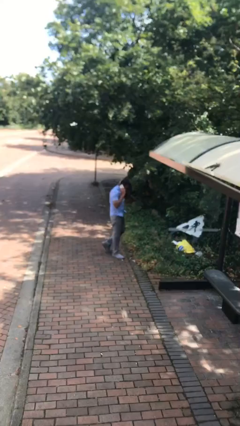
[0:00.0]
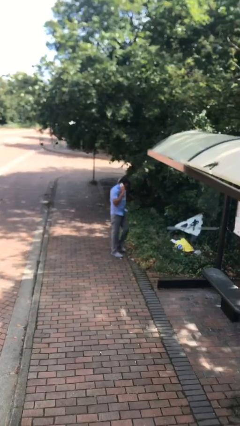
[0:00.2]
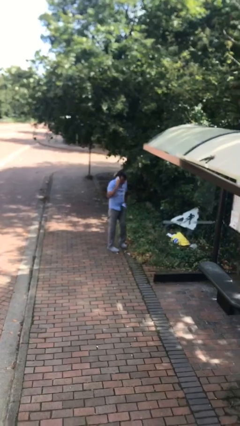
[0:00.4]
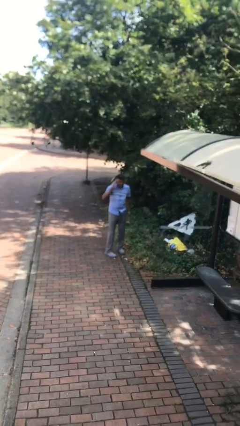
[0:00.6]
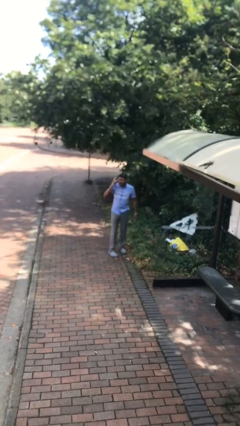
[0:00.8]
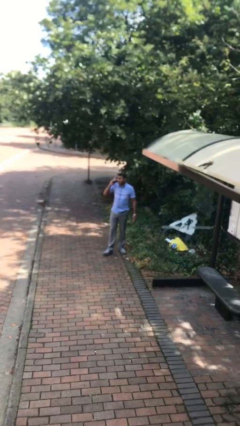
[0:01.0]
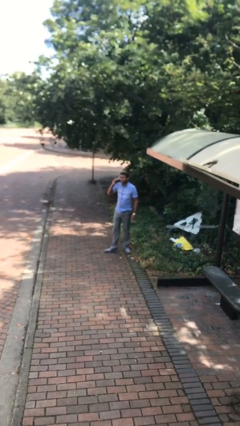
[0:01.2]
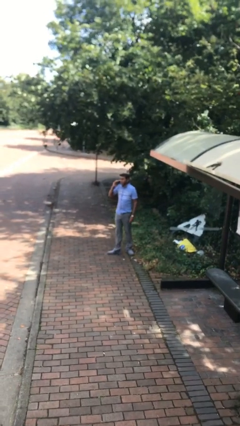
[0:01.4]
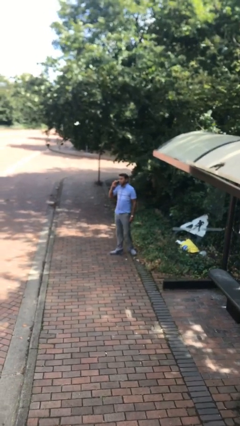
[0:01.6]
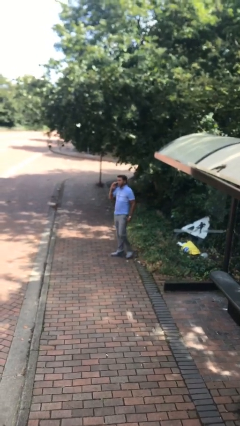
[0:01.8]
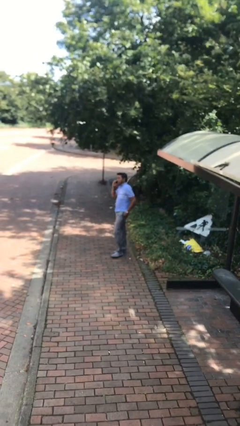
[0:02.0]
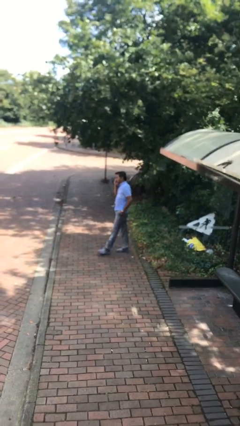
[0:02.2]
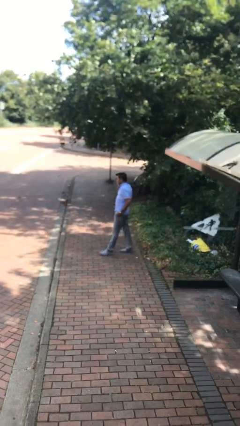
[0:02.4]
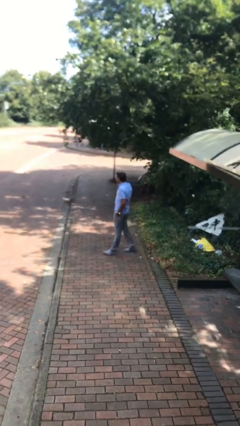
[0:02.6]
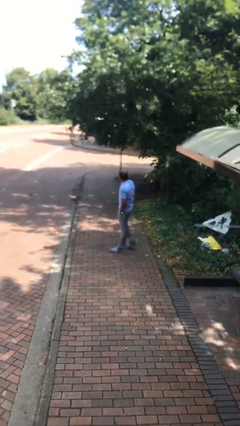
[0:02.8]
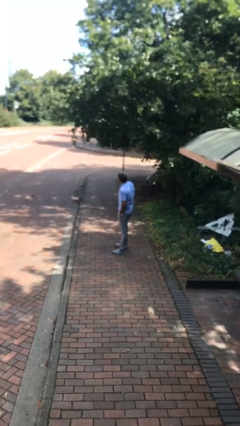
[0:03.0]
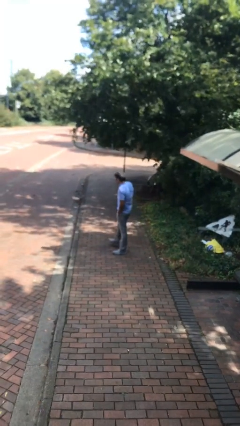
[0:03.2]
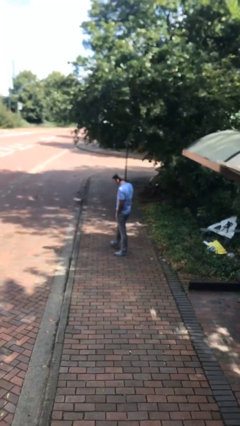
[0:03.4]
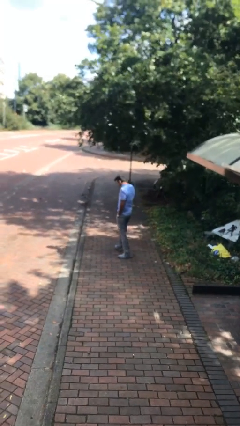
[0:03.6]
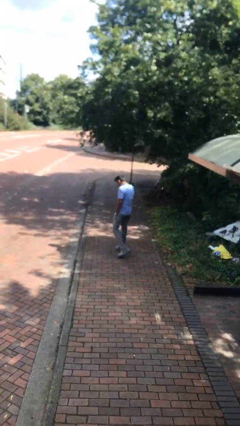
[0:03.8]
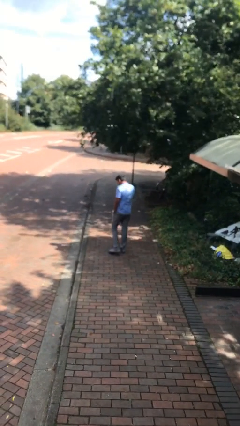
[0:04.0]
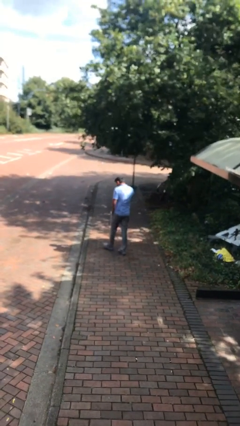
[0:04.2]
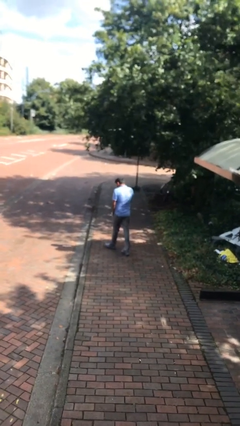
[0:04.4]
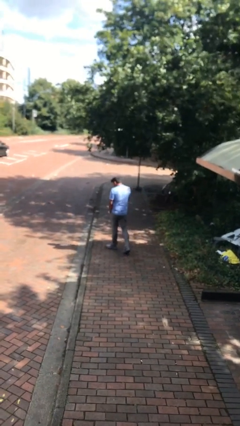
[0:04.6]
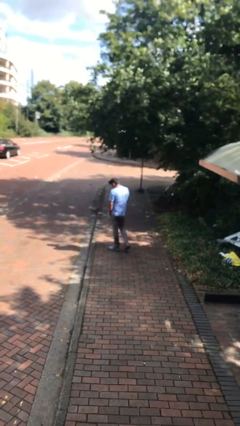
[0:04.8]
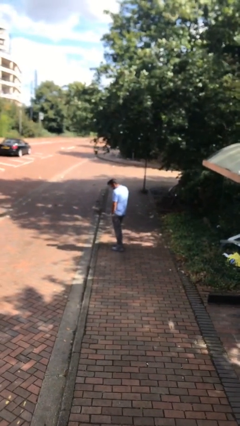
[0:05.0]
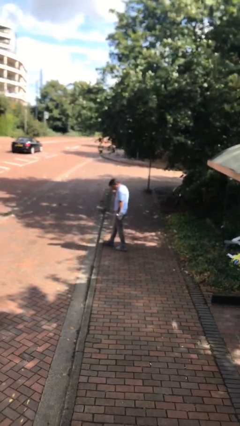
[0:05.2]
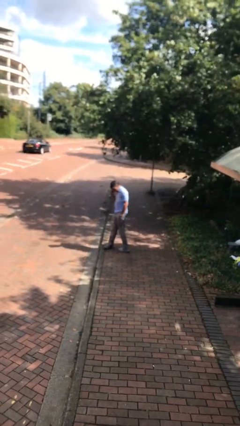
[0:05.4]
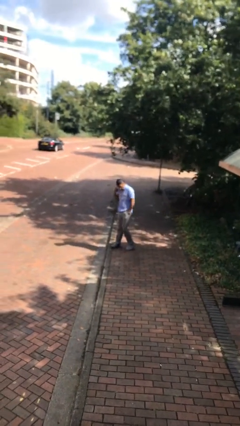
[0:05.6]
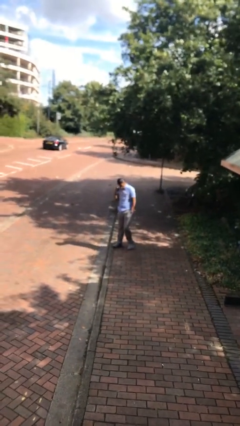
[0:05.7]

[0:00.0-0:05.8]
person talks on phone

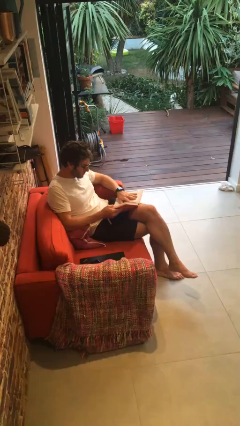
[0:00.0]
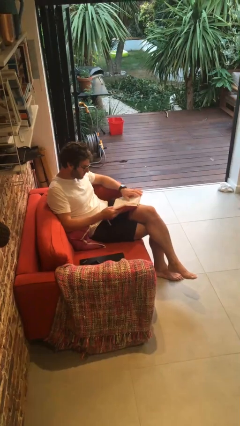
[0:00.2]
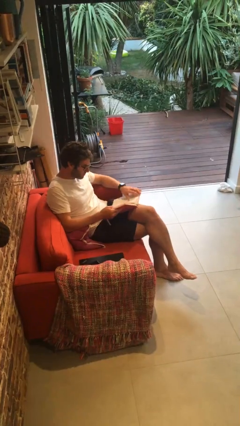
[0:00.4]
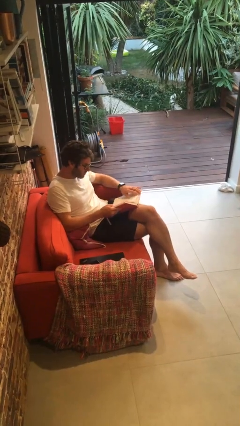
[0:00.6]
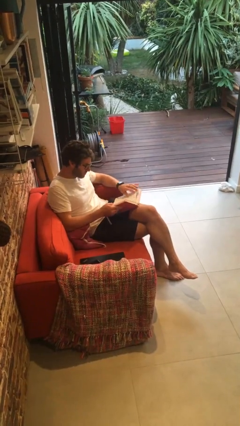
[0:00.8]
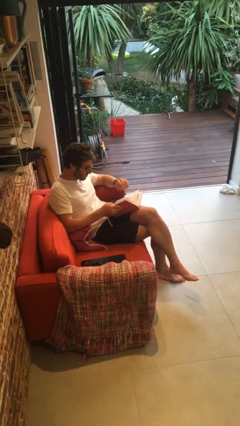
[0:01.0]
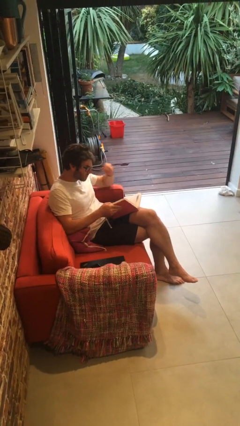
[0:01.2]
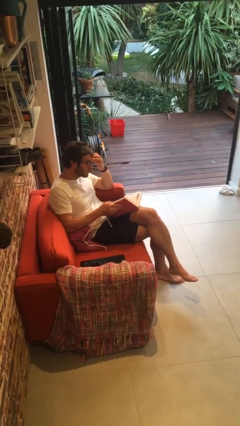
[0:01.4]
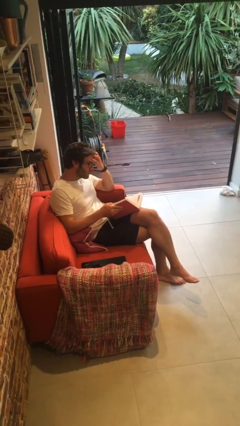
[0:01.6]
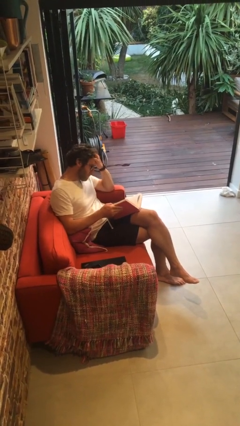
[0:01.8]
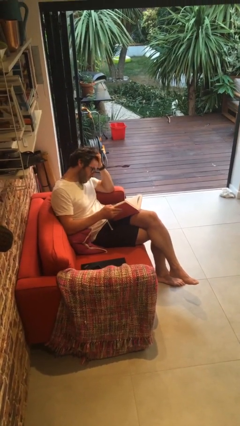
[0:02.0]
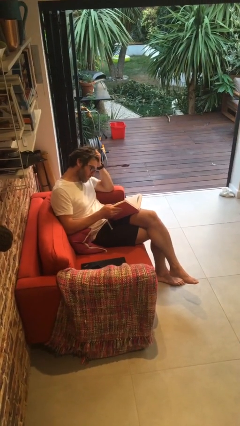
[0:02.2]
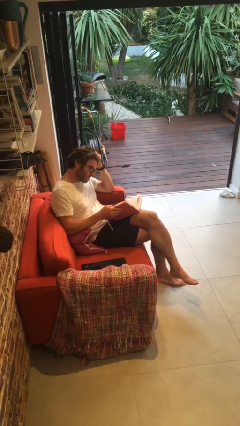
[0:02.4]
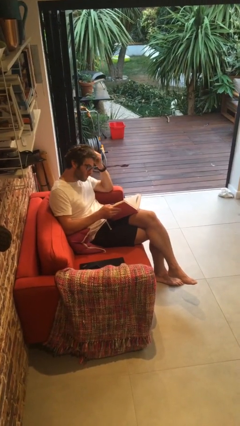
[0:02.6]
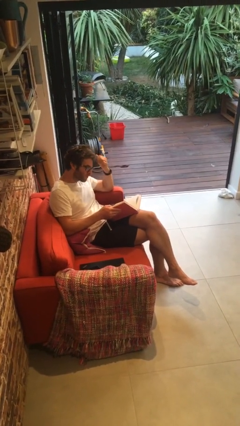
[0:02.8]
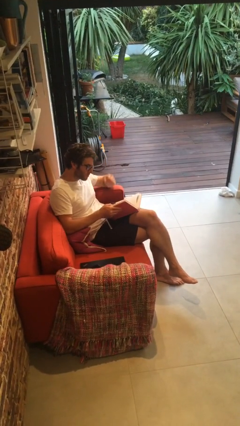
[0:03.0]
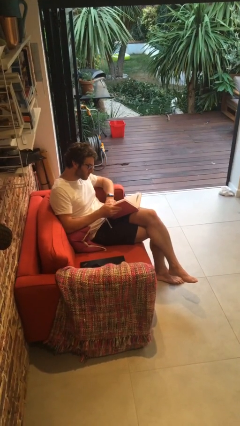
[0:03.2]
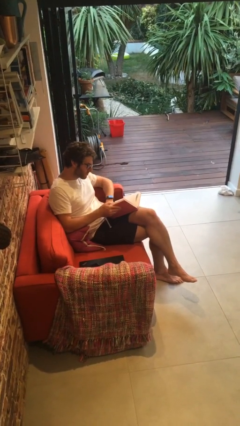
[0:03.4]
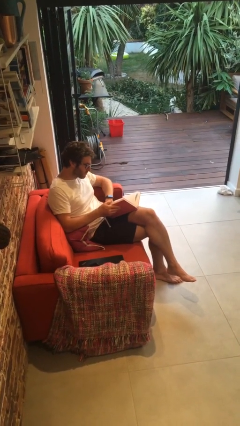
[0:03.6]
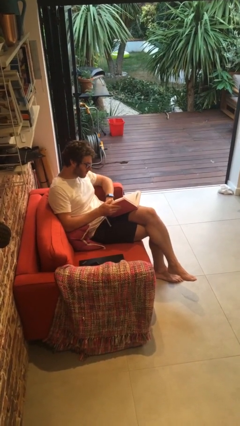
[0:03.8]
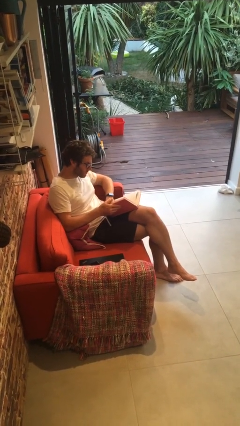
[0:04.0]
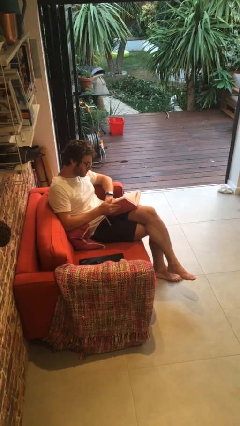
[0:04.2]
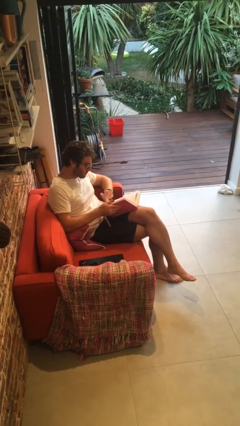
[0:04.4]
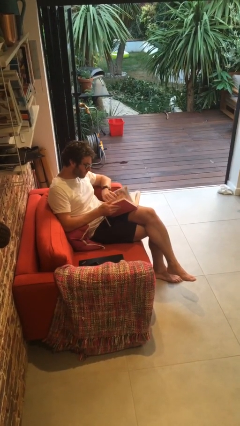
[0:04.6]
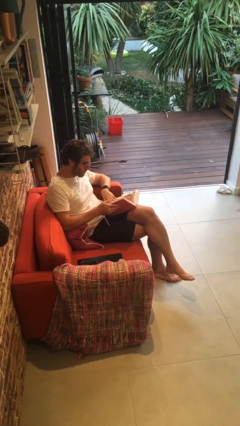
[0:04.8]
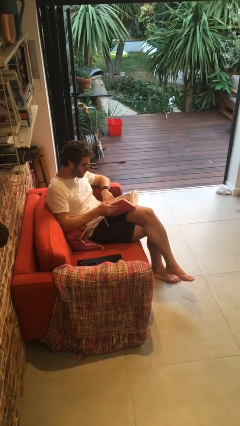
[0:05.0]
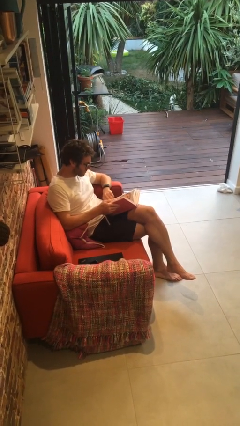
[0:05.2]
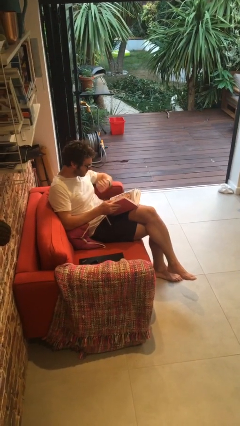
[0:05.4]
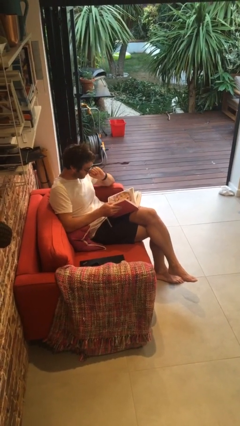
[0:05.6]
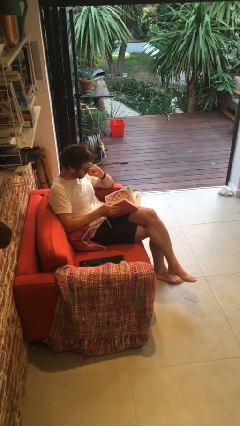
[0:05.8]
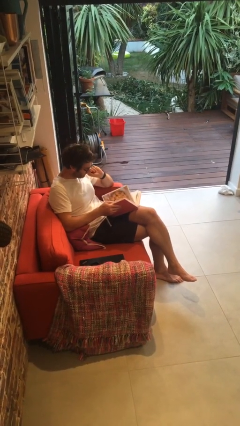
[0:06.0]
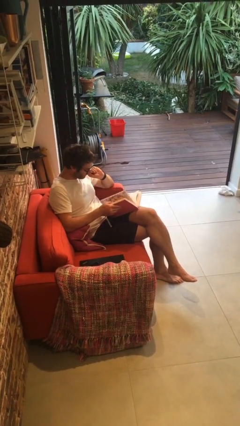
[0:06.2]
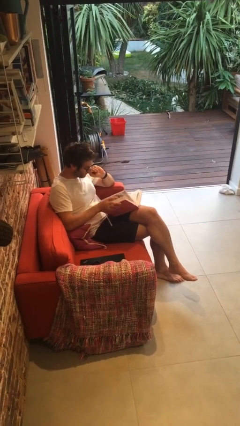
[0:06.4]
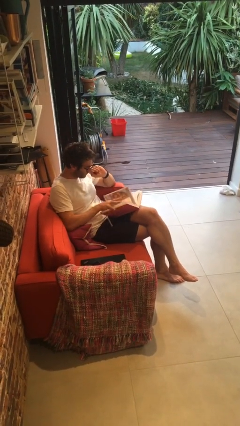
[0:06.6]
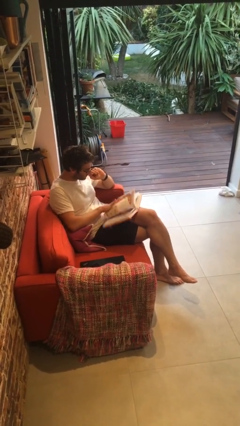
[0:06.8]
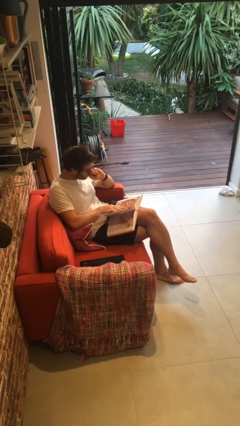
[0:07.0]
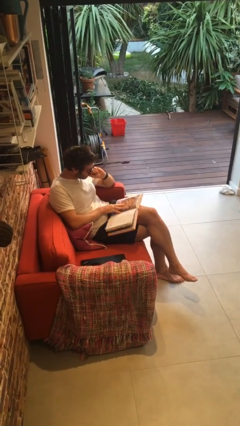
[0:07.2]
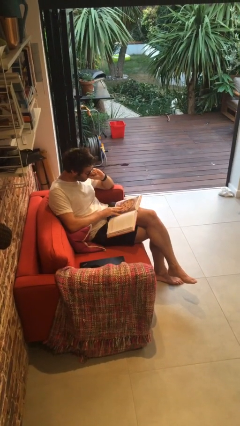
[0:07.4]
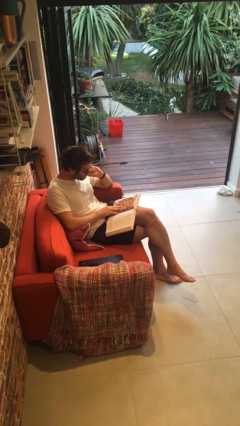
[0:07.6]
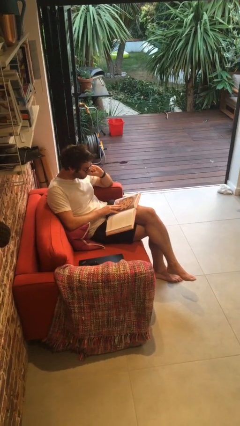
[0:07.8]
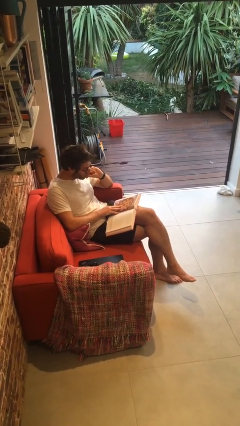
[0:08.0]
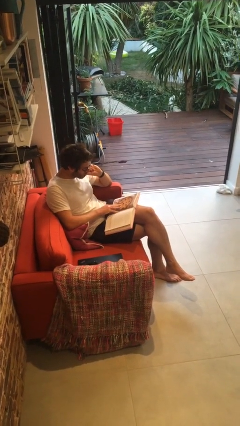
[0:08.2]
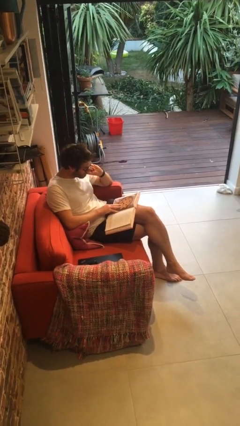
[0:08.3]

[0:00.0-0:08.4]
person reads document

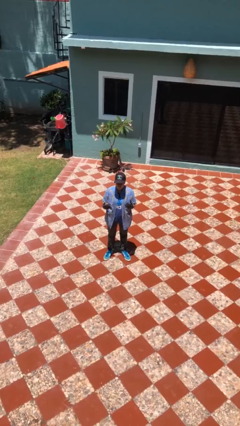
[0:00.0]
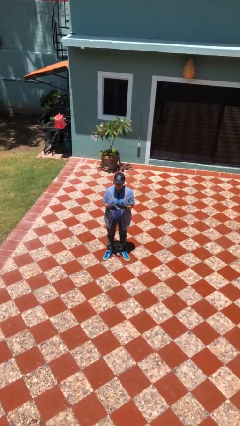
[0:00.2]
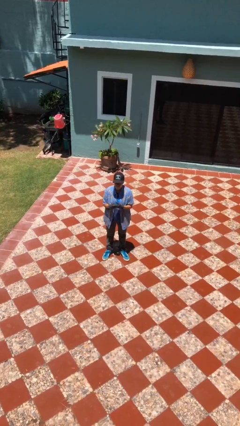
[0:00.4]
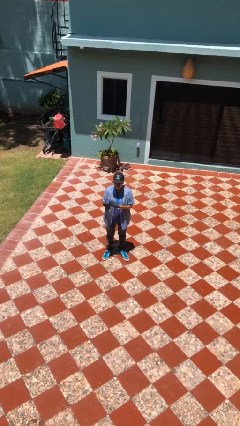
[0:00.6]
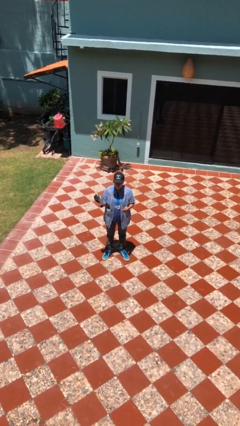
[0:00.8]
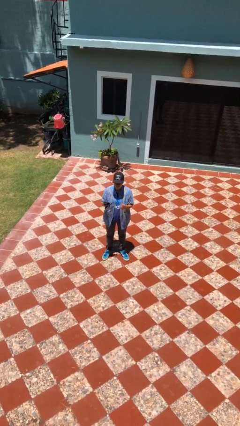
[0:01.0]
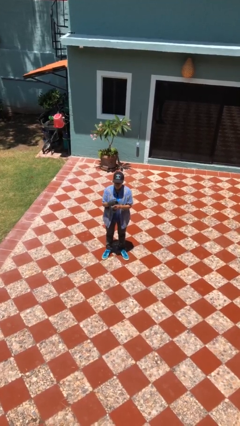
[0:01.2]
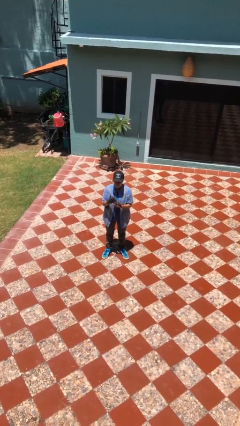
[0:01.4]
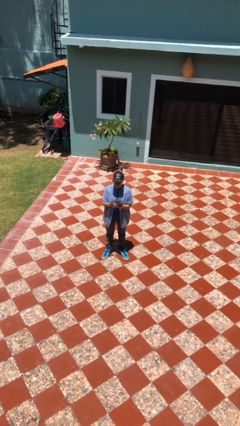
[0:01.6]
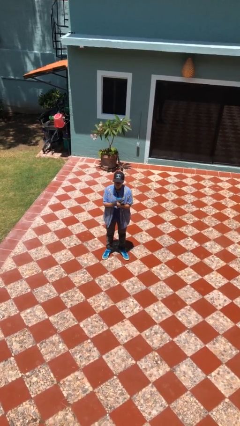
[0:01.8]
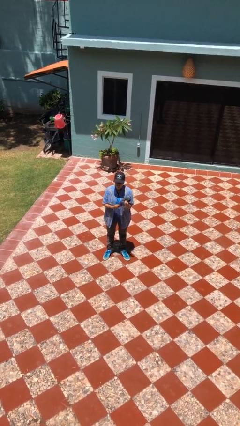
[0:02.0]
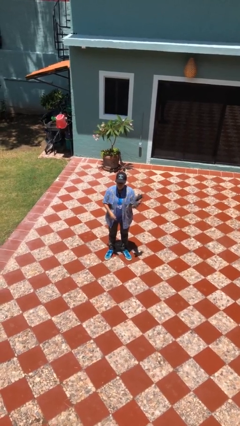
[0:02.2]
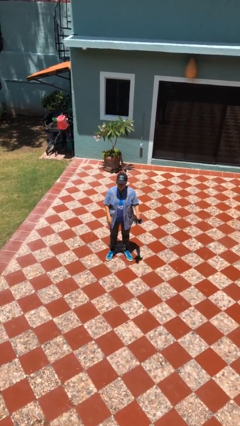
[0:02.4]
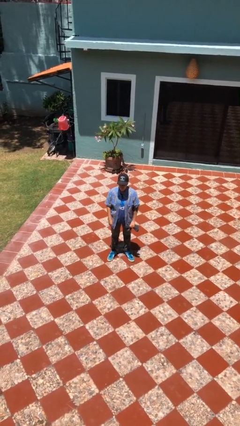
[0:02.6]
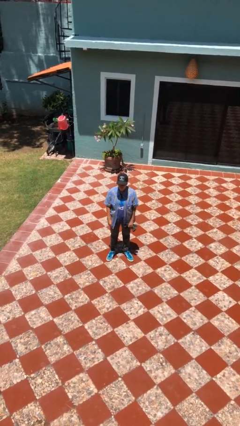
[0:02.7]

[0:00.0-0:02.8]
person takes off gloves

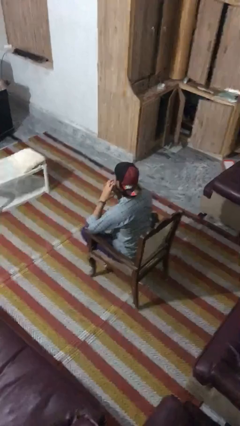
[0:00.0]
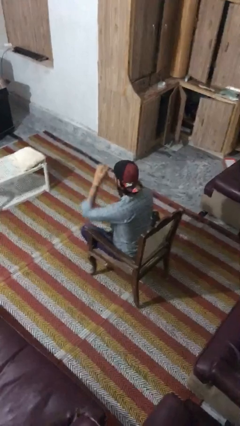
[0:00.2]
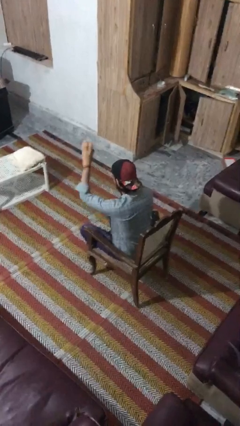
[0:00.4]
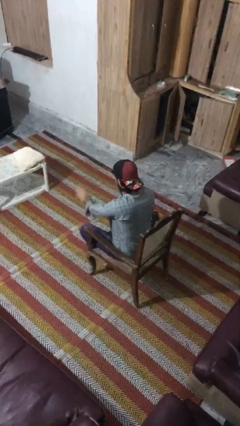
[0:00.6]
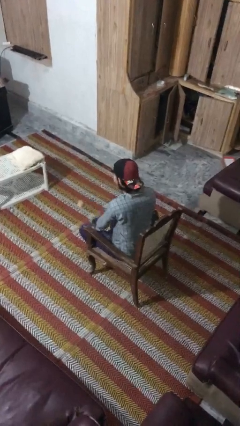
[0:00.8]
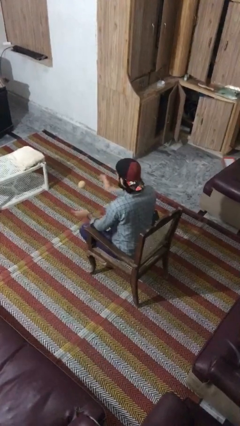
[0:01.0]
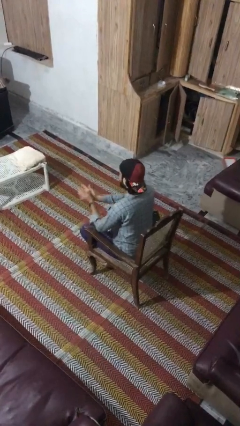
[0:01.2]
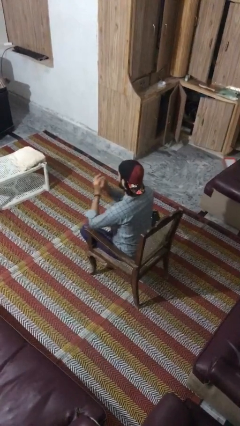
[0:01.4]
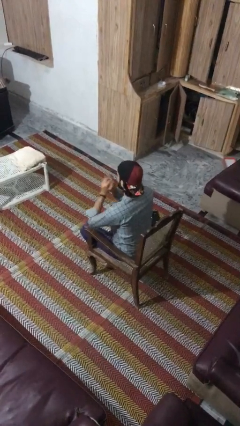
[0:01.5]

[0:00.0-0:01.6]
person bounces ball on floor
